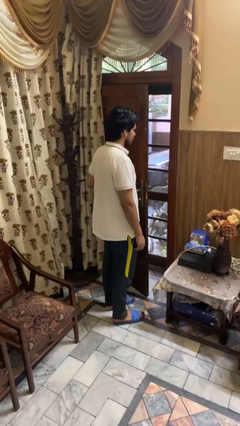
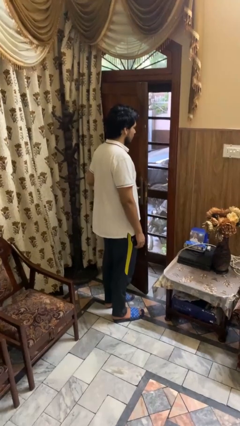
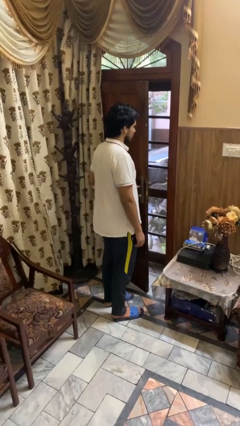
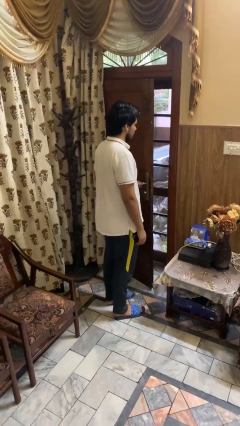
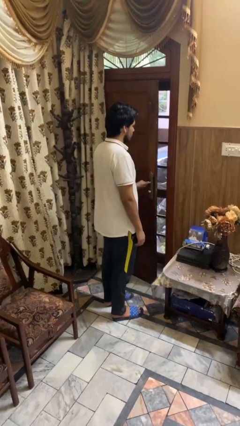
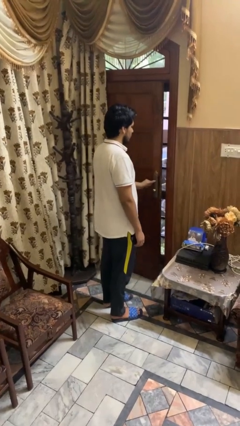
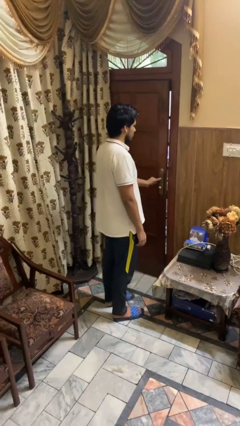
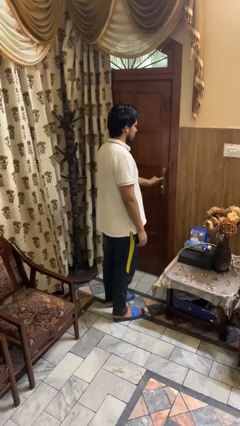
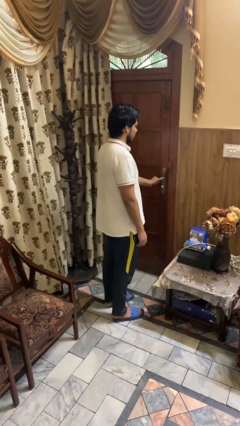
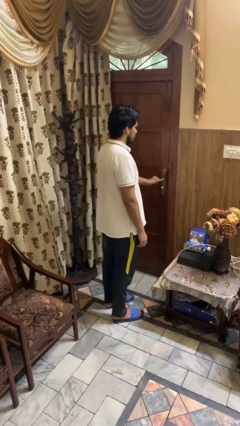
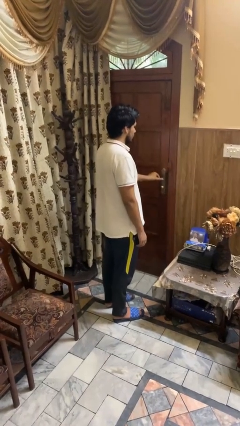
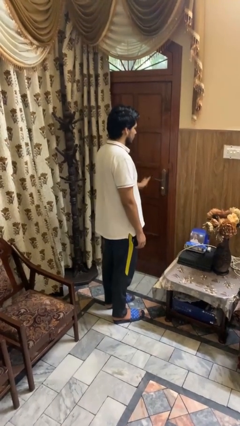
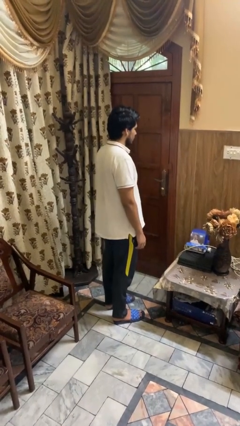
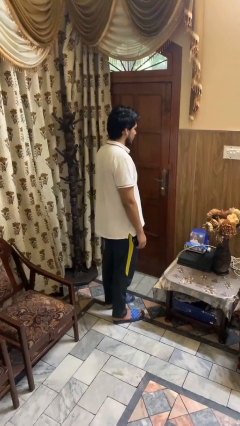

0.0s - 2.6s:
person closes facility door

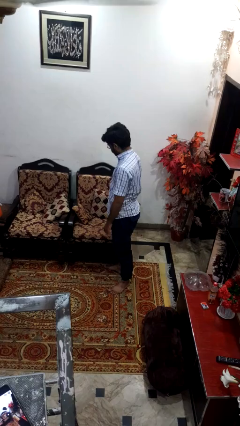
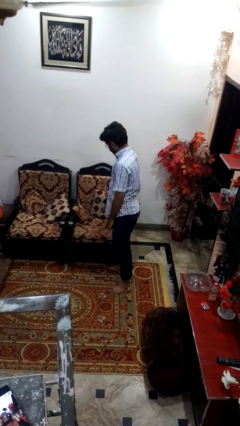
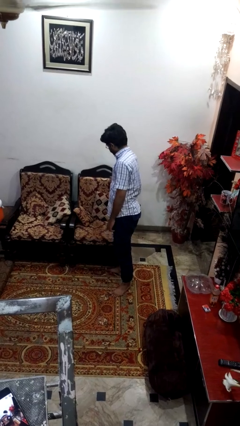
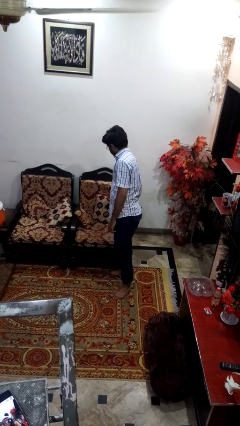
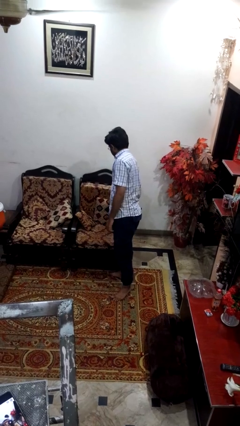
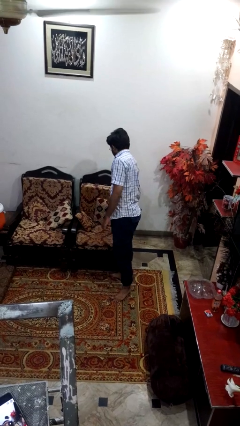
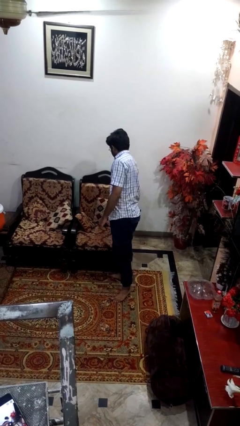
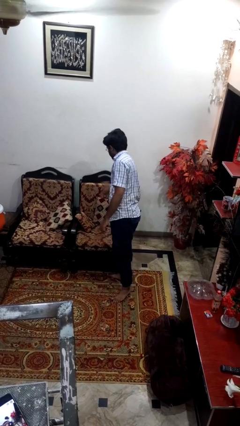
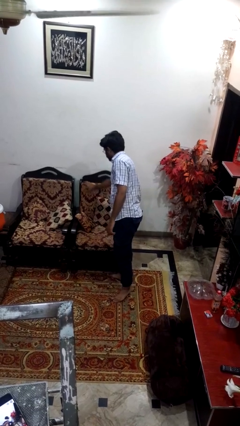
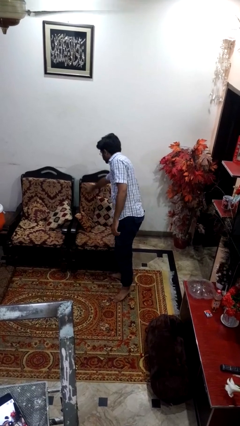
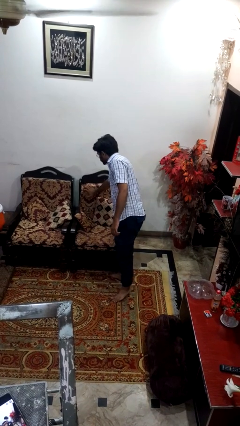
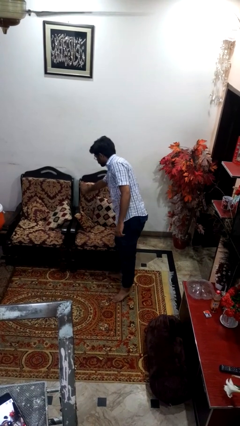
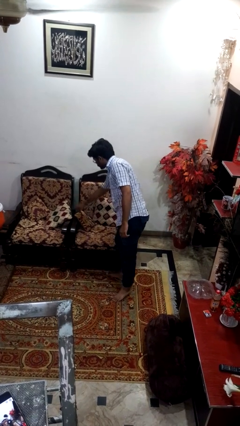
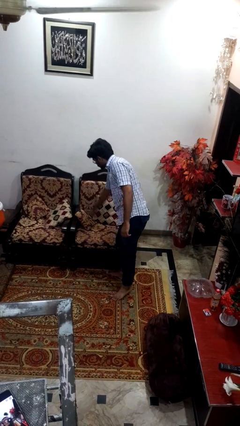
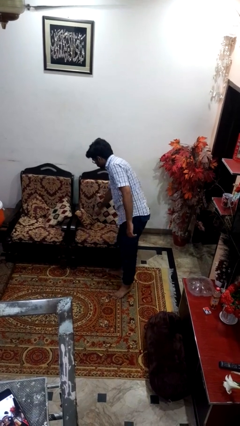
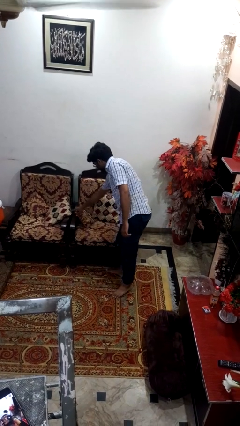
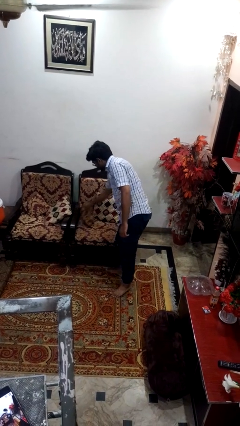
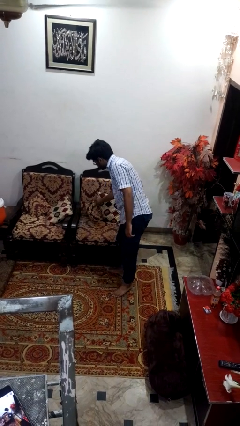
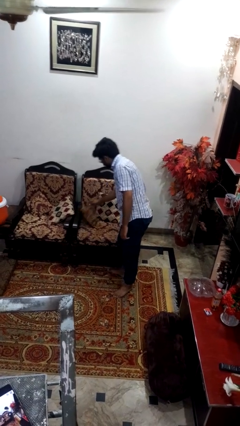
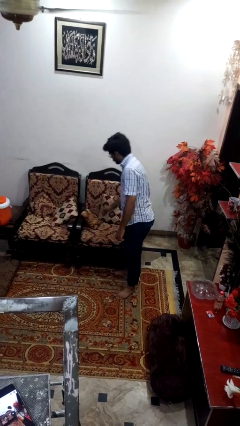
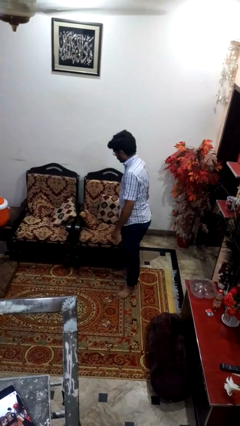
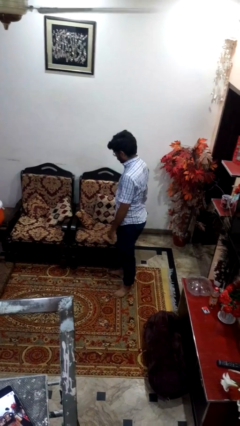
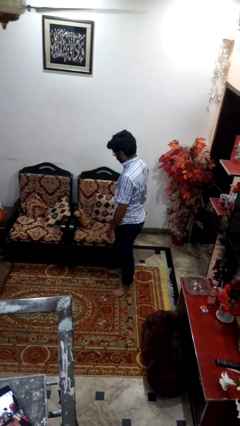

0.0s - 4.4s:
person searches in couch

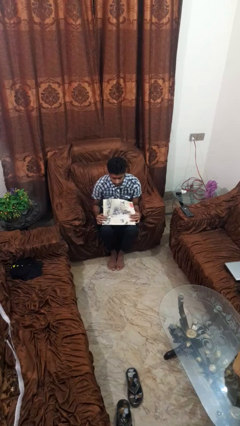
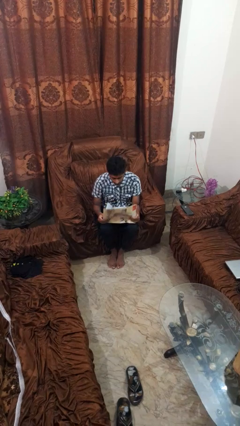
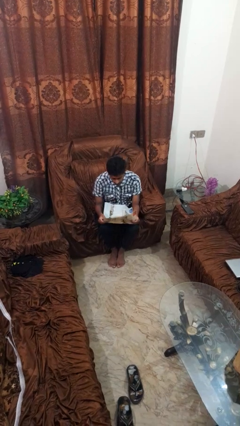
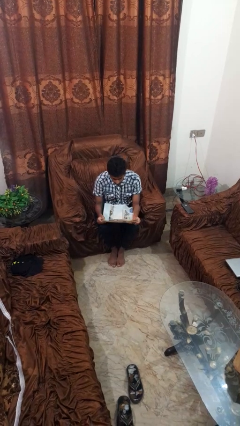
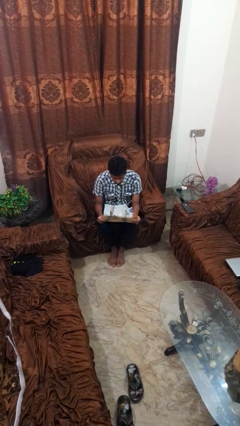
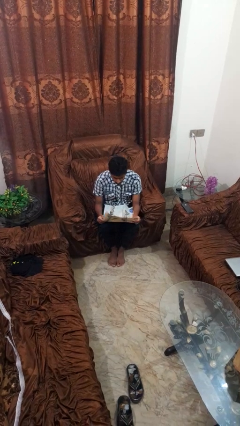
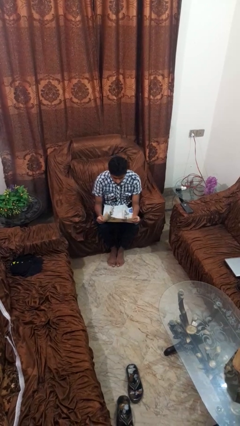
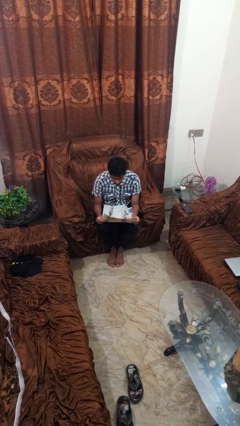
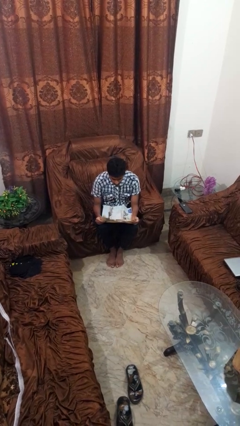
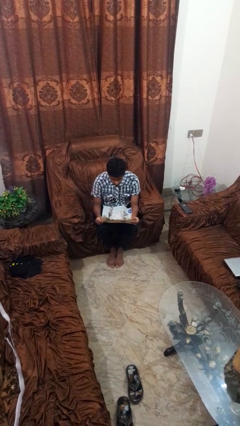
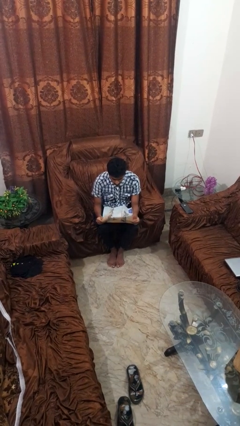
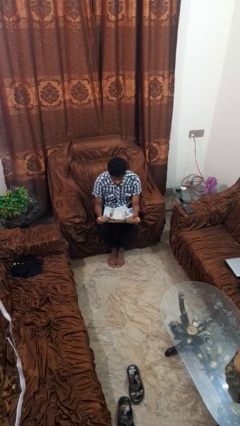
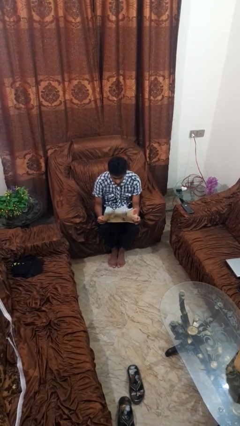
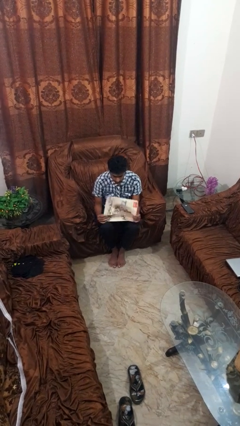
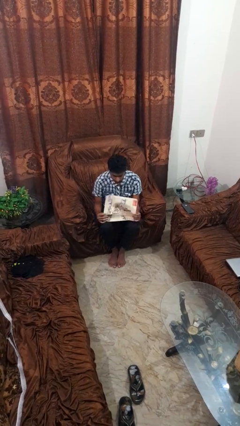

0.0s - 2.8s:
person reads newspaper

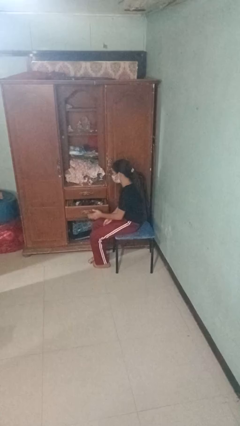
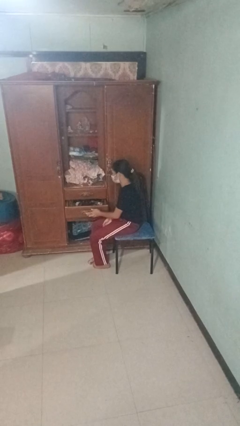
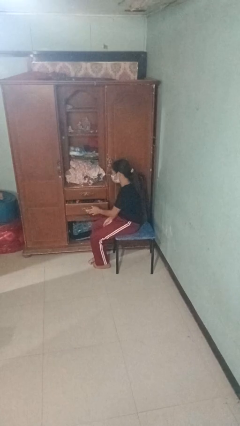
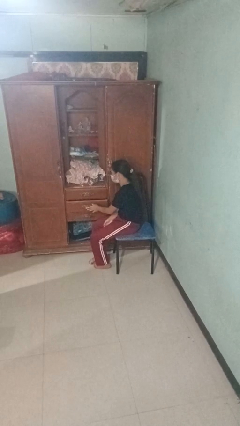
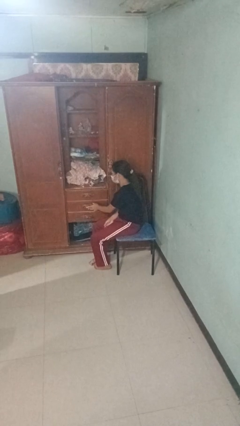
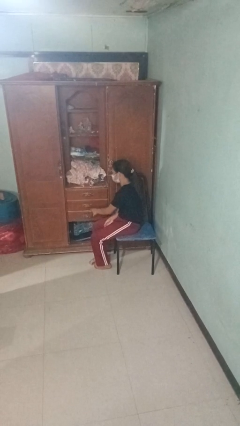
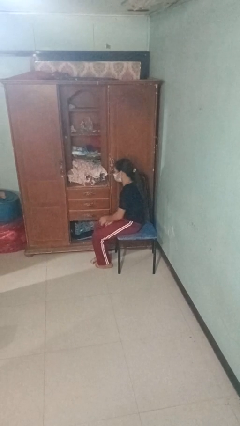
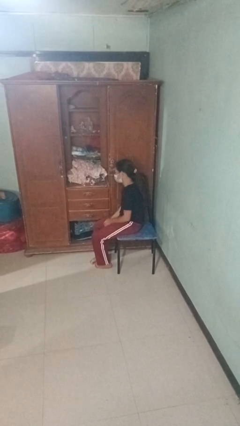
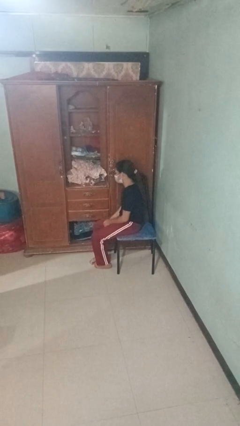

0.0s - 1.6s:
person closes dresser drawer

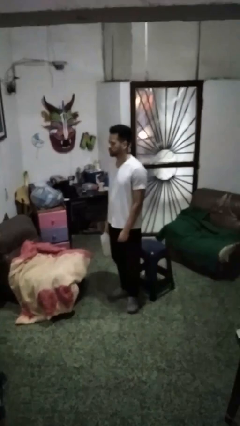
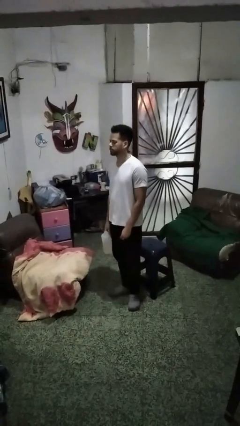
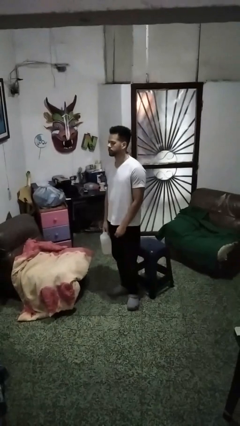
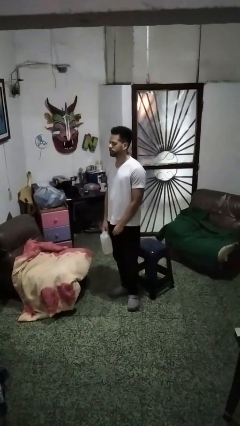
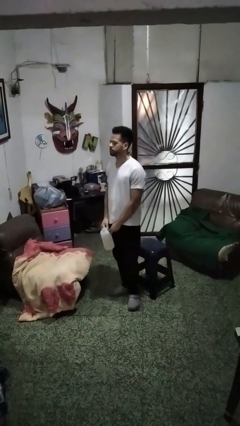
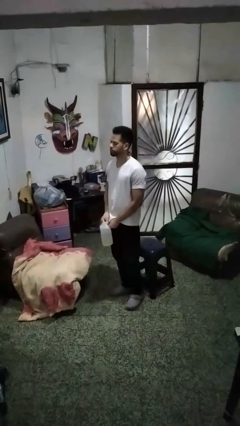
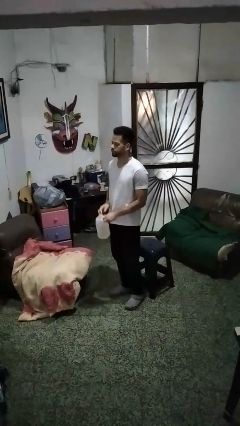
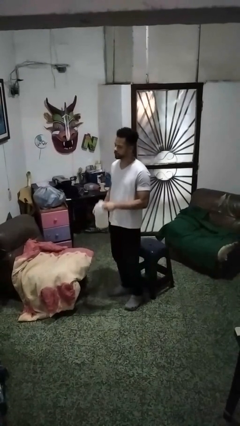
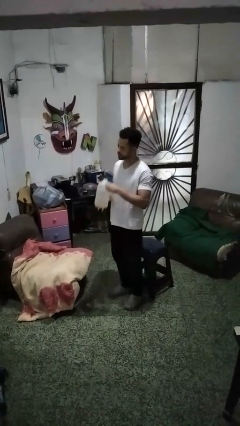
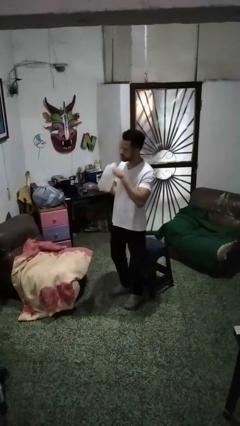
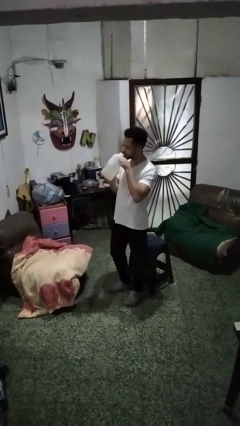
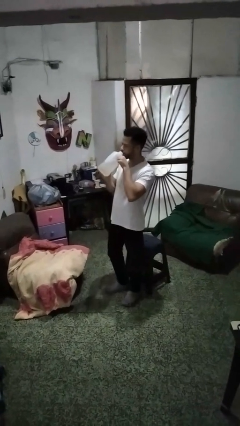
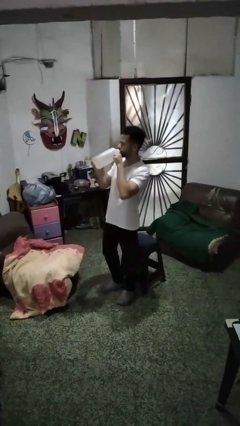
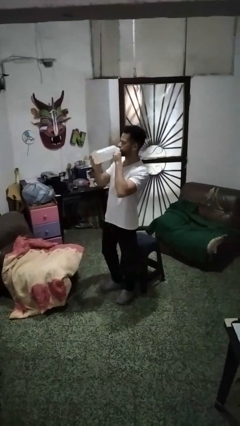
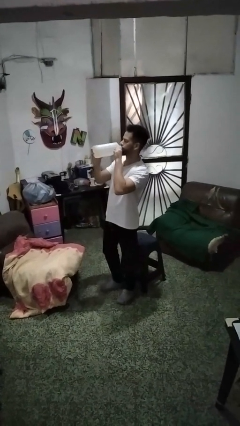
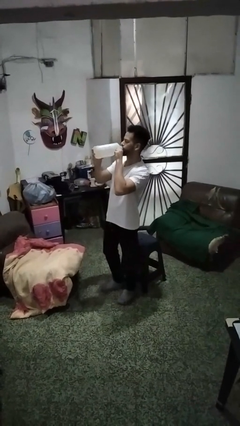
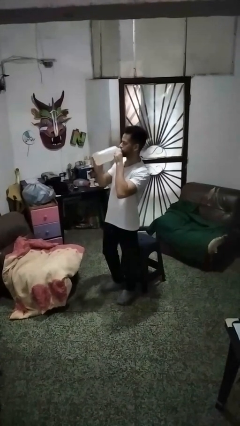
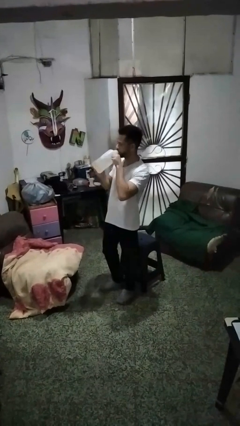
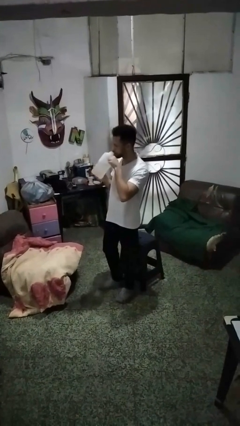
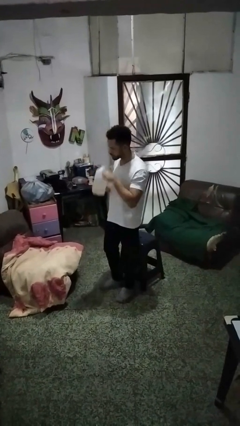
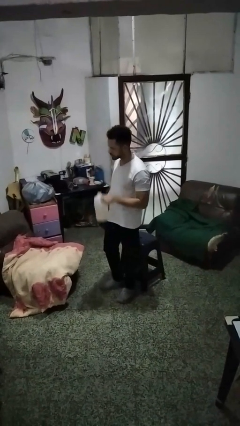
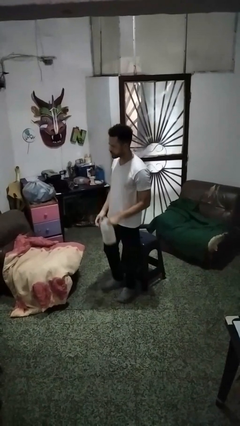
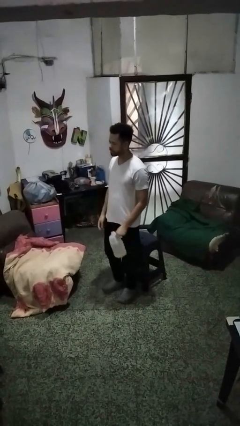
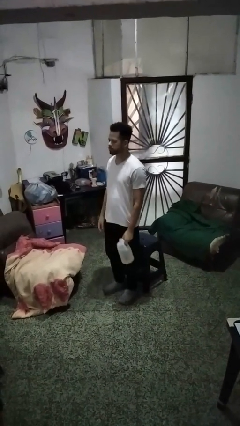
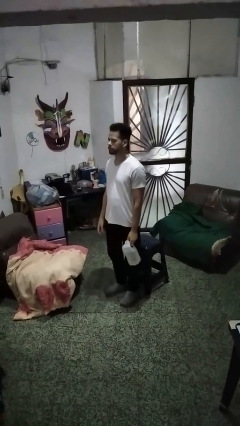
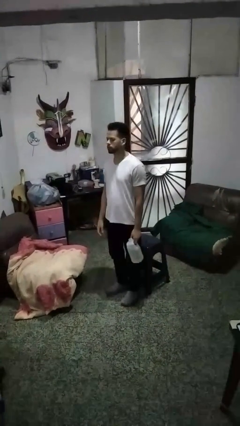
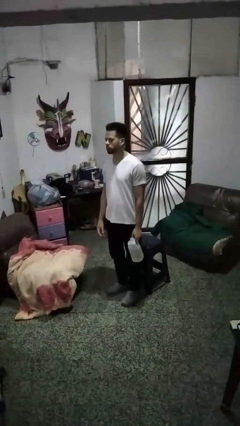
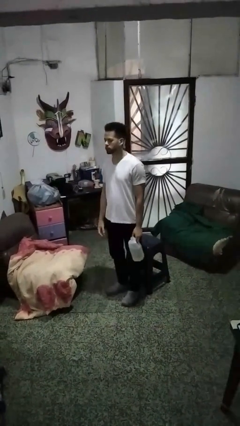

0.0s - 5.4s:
person drinks from bottle

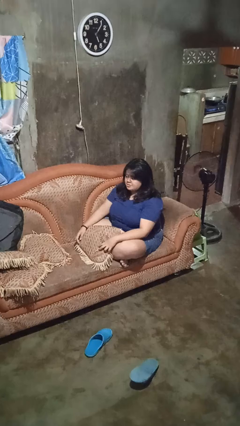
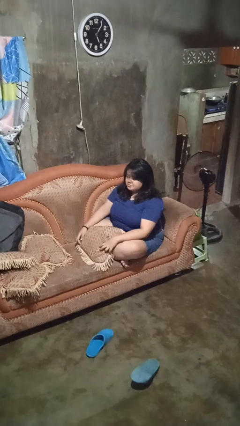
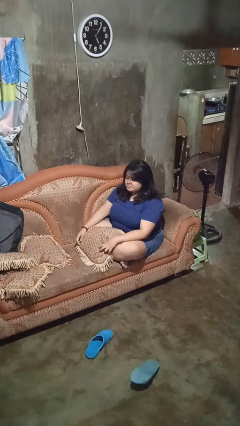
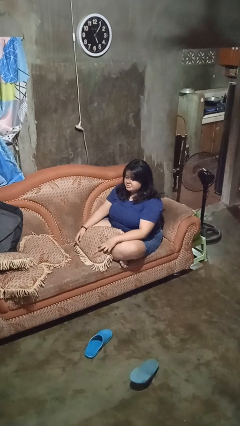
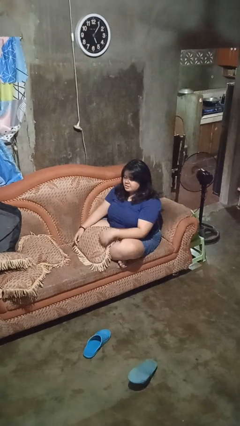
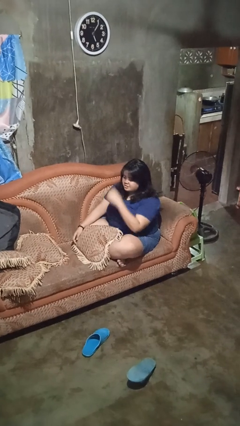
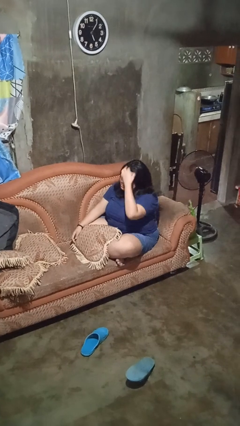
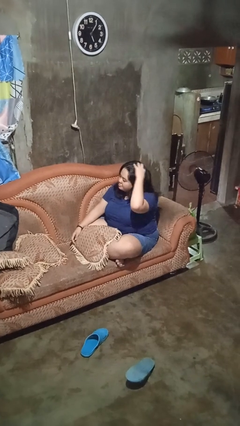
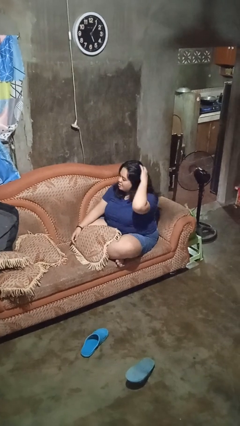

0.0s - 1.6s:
person strokes hair
